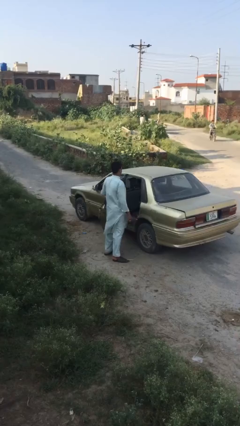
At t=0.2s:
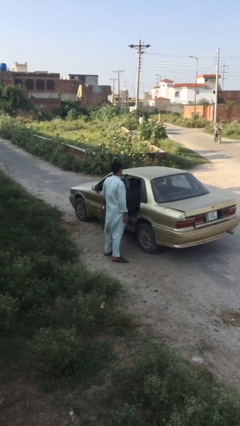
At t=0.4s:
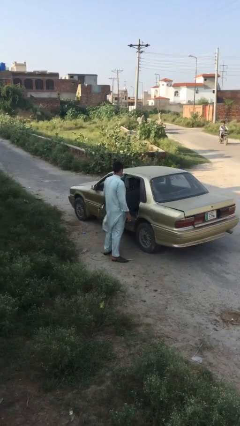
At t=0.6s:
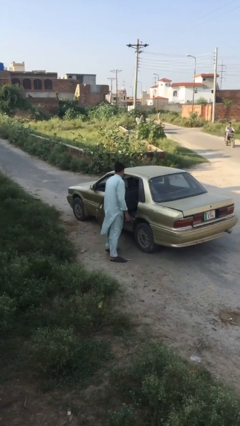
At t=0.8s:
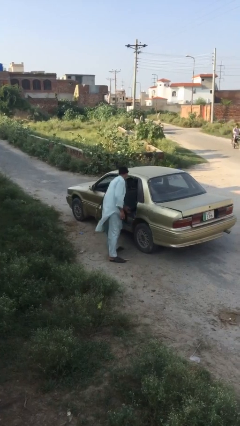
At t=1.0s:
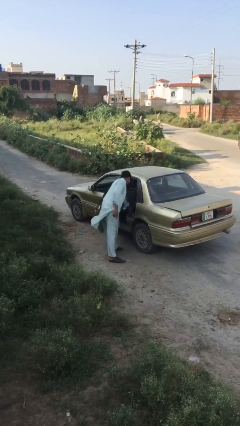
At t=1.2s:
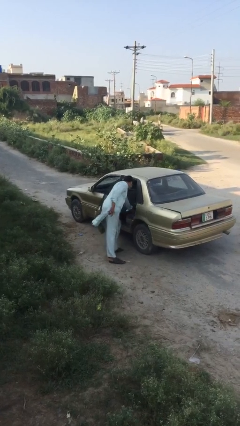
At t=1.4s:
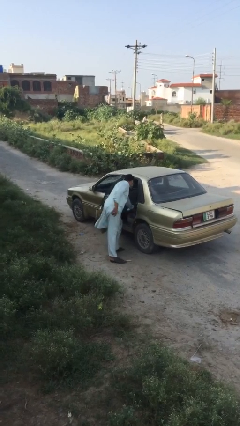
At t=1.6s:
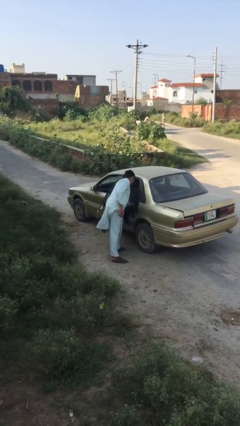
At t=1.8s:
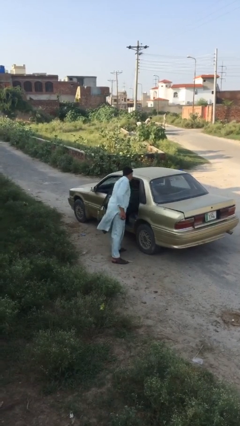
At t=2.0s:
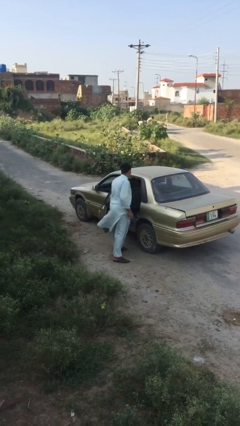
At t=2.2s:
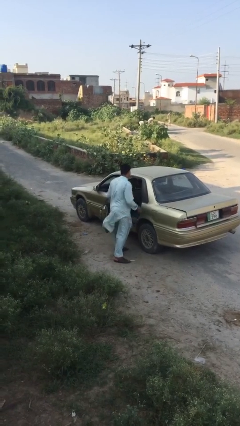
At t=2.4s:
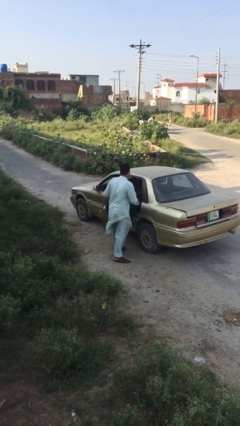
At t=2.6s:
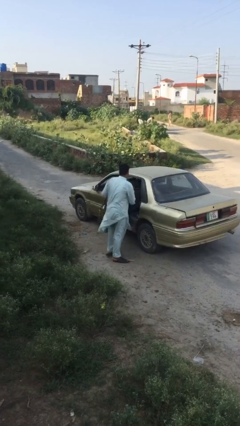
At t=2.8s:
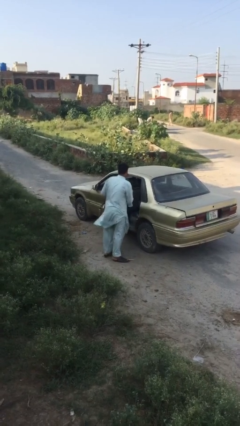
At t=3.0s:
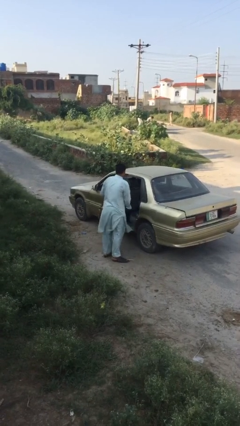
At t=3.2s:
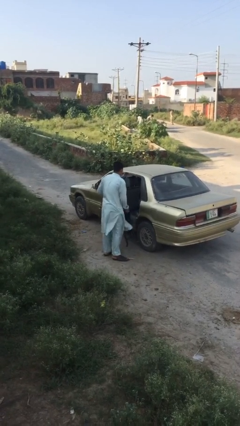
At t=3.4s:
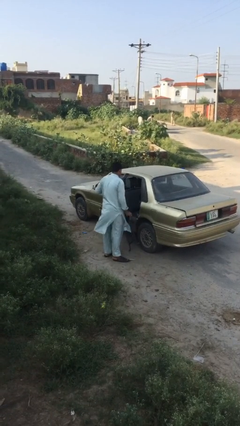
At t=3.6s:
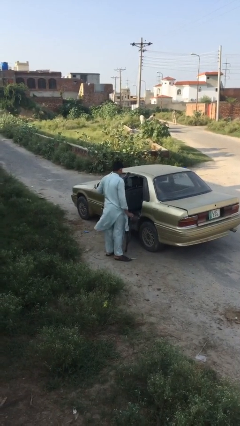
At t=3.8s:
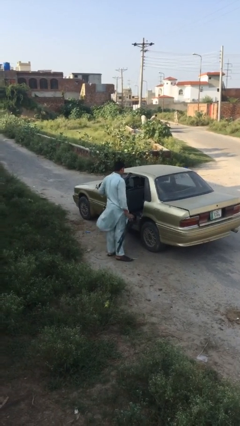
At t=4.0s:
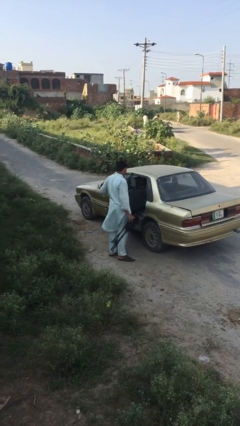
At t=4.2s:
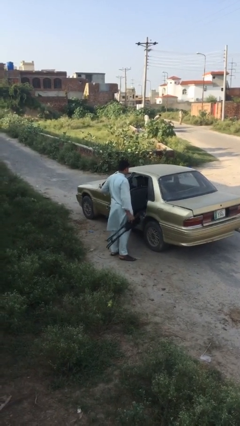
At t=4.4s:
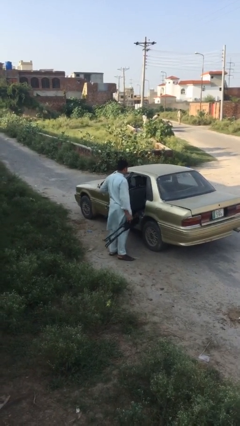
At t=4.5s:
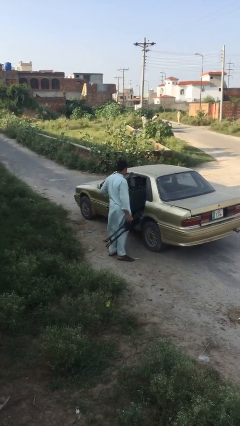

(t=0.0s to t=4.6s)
person unloads car

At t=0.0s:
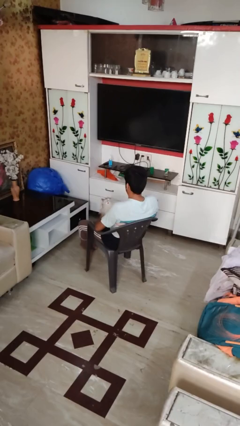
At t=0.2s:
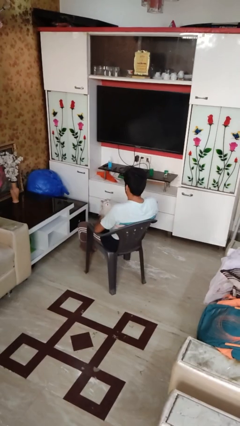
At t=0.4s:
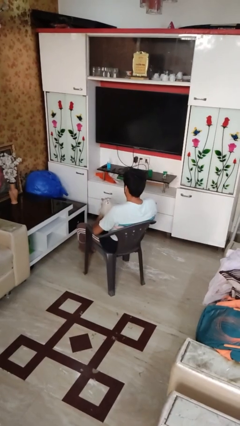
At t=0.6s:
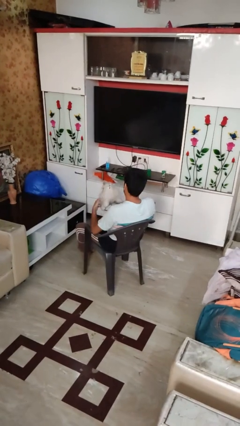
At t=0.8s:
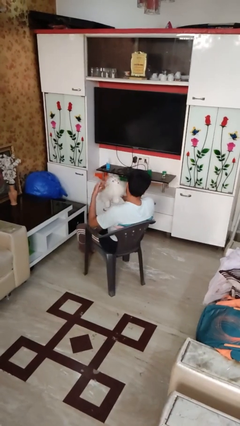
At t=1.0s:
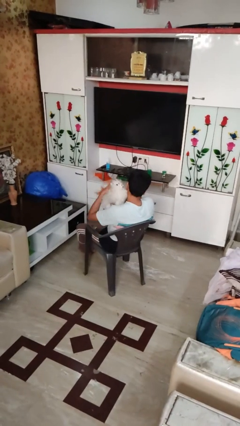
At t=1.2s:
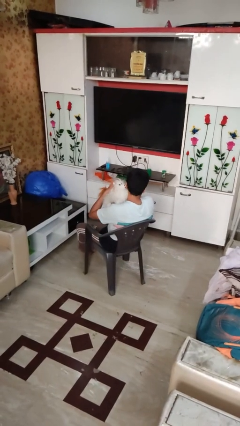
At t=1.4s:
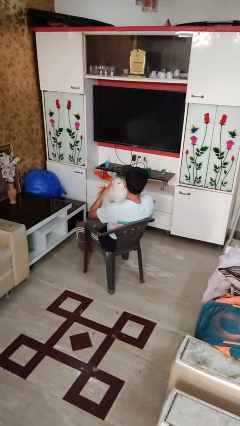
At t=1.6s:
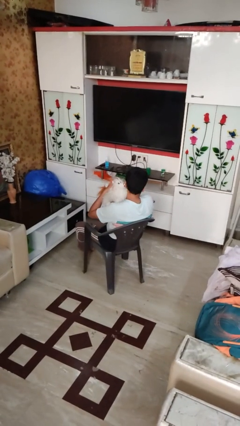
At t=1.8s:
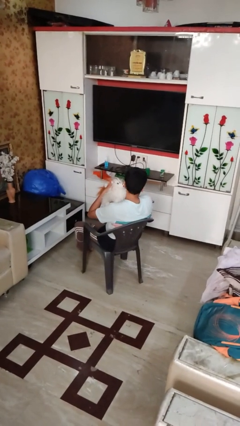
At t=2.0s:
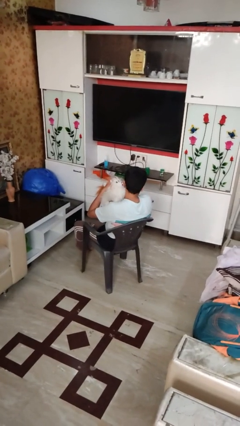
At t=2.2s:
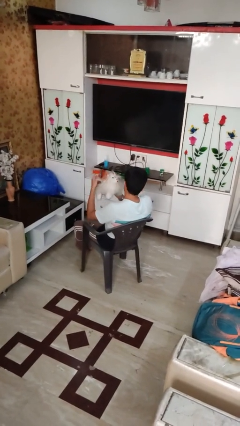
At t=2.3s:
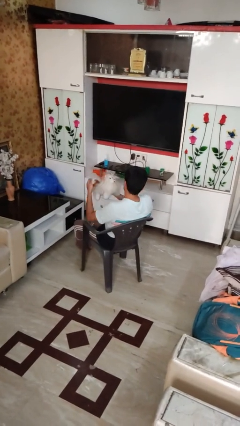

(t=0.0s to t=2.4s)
person hugs stuffed animal

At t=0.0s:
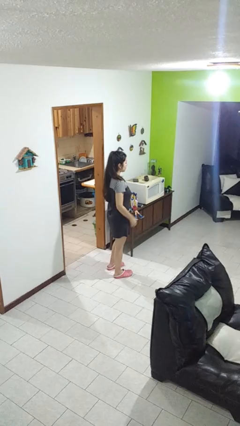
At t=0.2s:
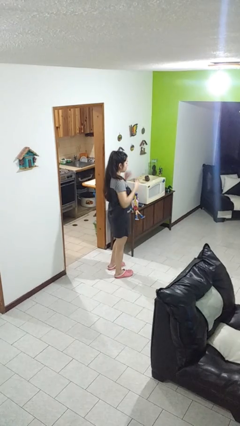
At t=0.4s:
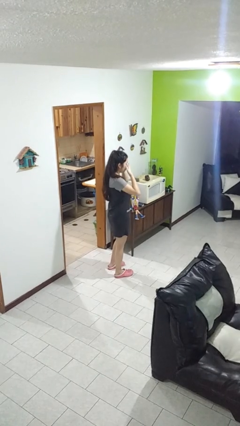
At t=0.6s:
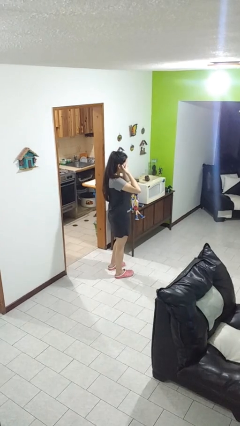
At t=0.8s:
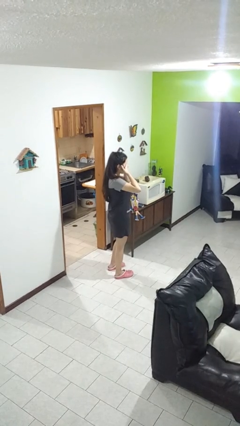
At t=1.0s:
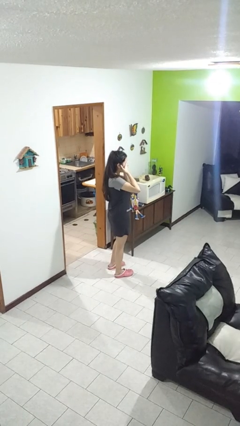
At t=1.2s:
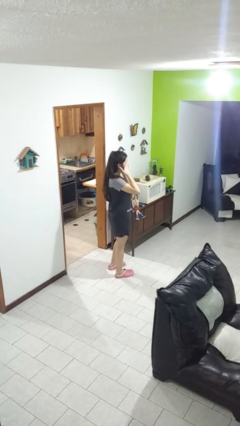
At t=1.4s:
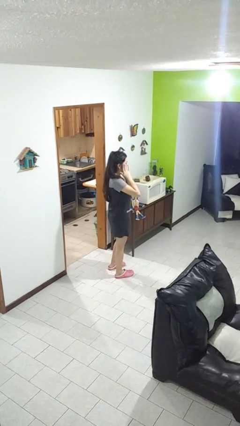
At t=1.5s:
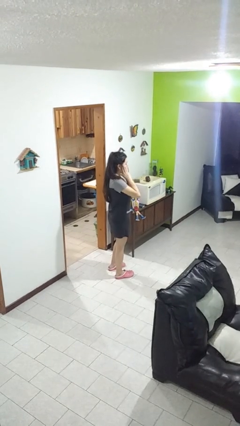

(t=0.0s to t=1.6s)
person rubs eyes

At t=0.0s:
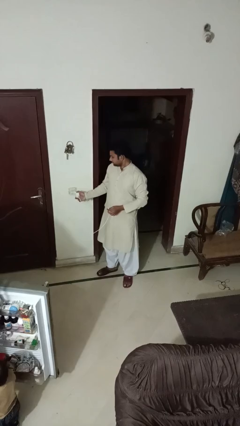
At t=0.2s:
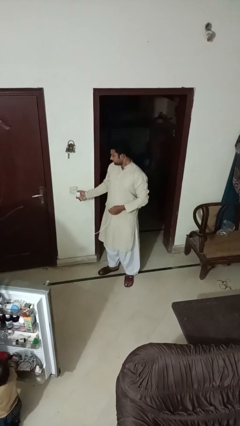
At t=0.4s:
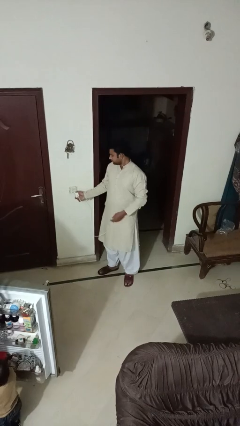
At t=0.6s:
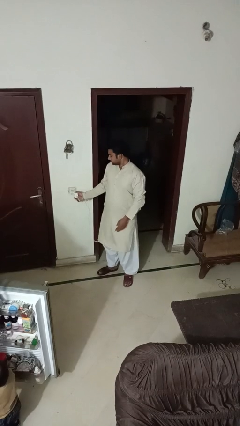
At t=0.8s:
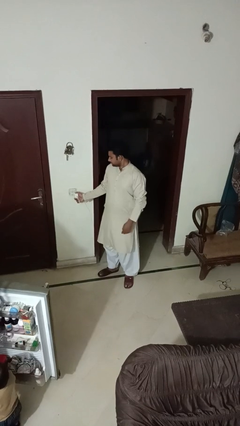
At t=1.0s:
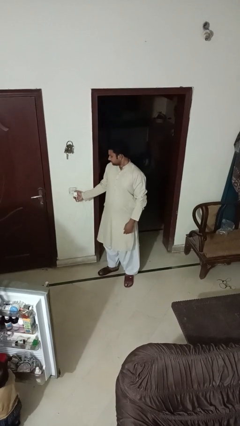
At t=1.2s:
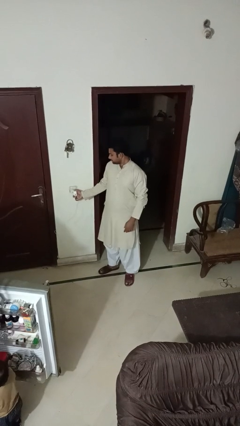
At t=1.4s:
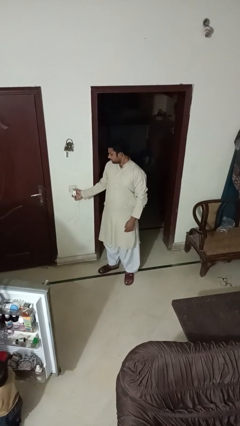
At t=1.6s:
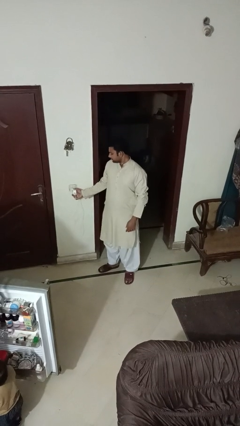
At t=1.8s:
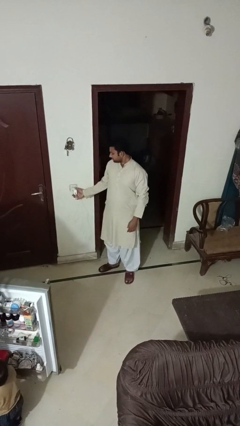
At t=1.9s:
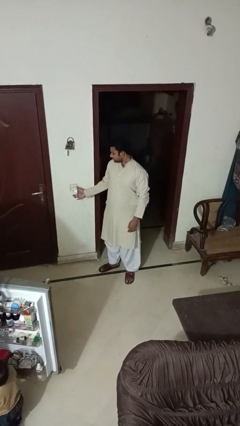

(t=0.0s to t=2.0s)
person plugs into electrical socket

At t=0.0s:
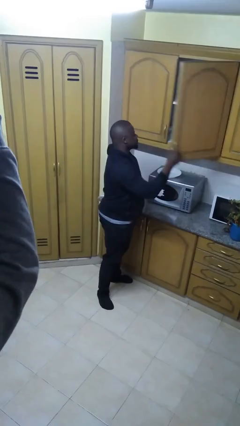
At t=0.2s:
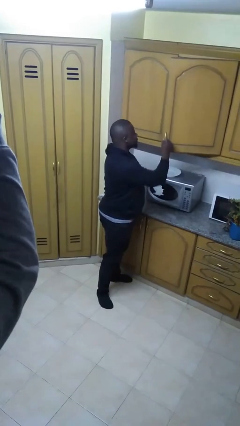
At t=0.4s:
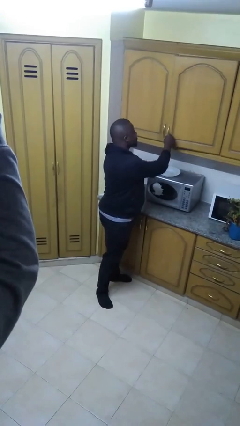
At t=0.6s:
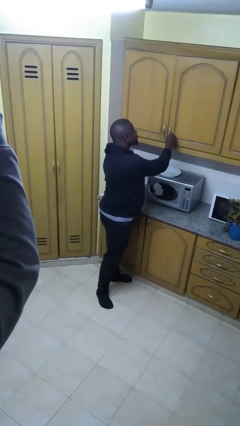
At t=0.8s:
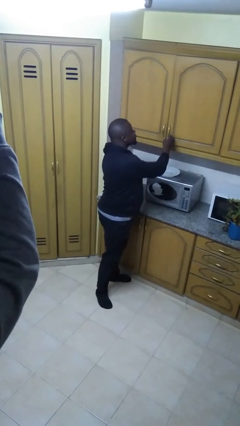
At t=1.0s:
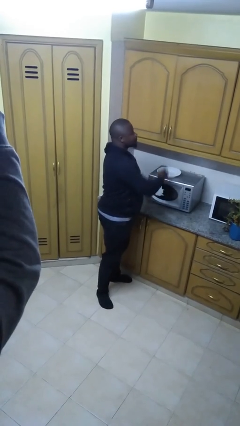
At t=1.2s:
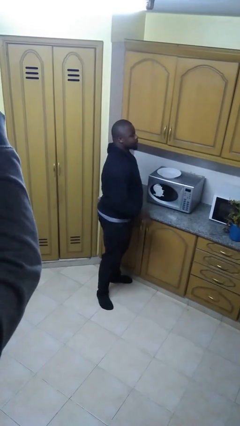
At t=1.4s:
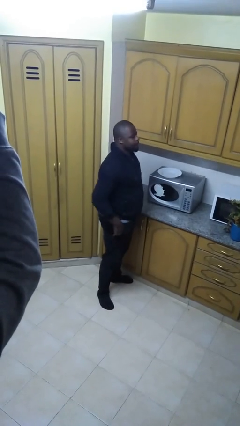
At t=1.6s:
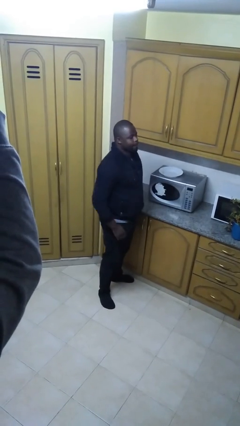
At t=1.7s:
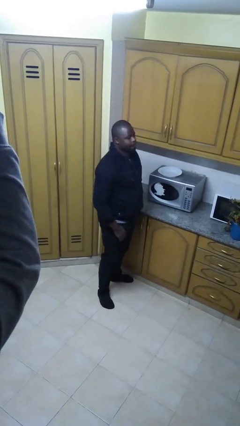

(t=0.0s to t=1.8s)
person closes cabinet

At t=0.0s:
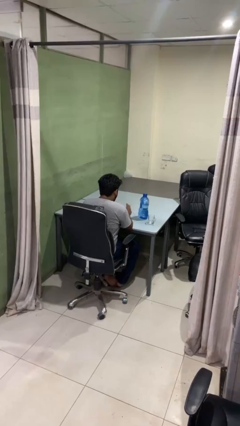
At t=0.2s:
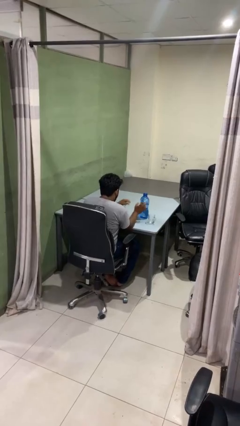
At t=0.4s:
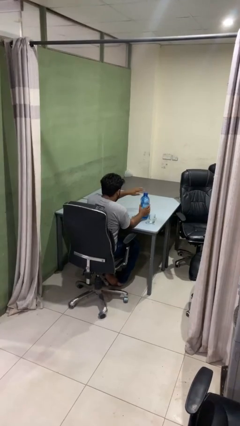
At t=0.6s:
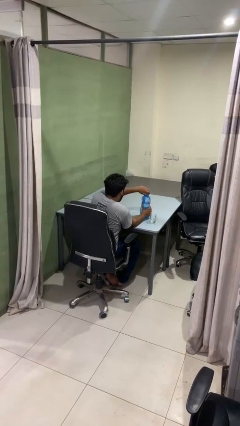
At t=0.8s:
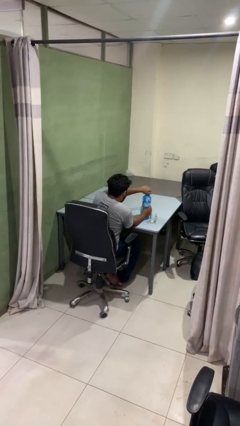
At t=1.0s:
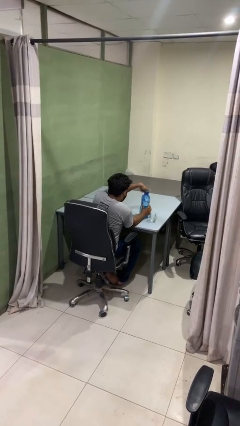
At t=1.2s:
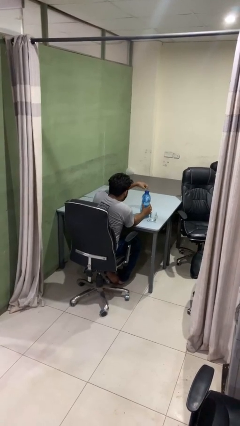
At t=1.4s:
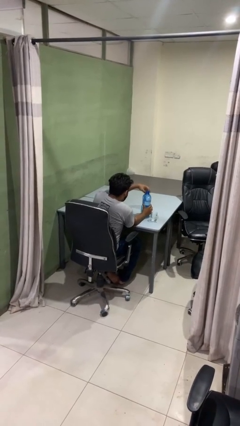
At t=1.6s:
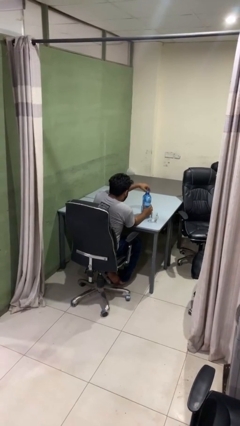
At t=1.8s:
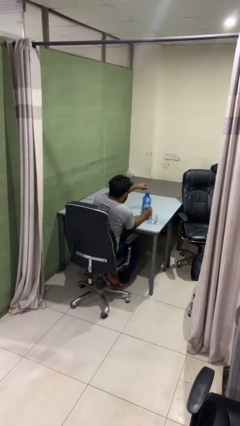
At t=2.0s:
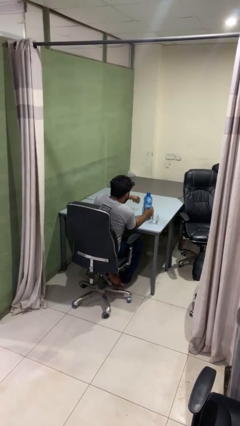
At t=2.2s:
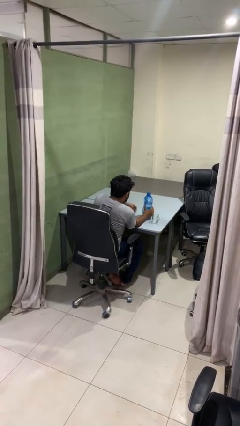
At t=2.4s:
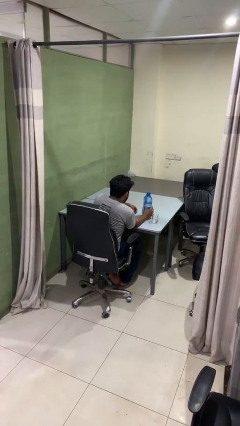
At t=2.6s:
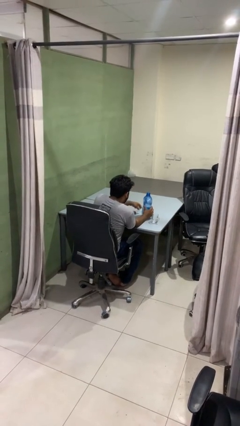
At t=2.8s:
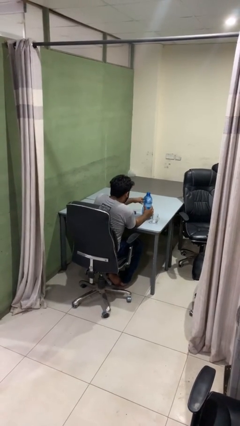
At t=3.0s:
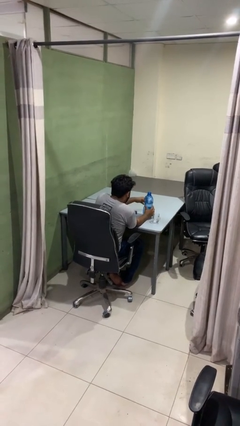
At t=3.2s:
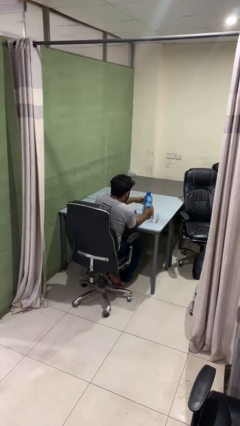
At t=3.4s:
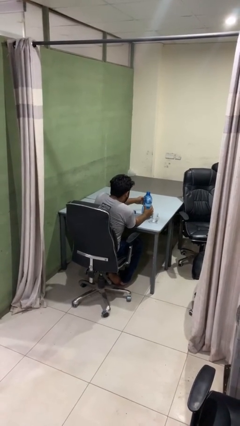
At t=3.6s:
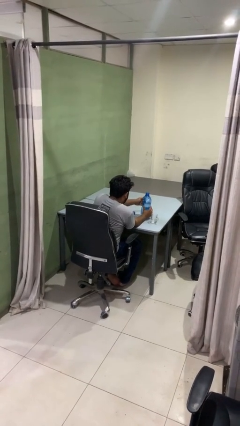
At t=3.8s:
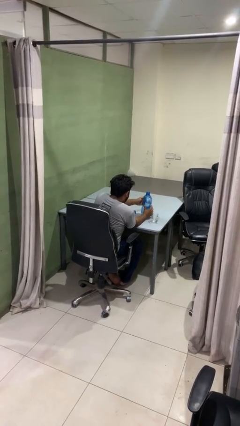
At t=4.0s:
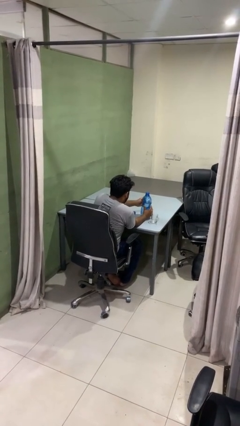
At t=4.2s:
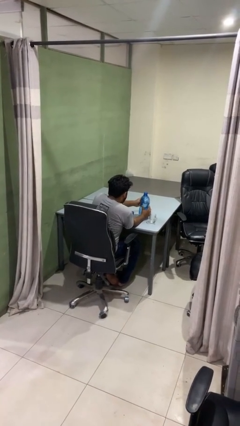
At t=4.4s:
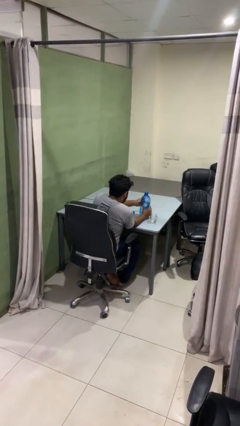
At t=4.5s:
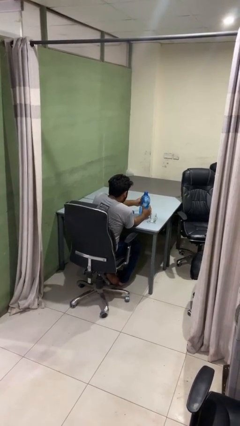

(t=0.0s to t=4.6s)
person unscrews lid from bottle

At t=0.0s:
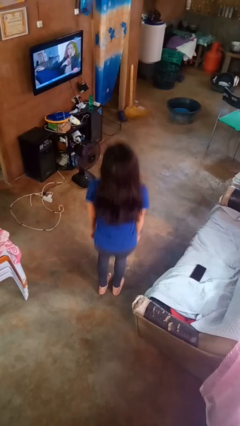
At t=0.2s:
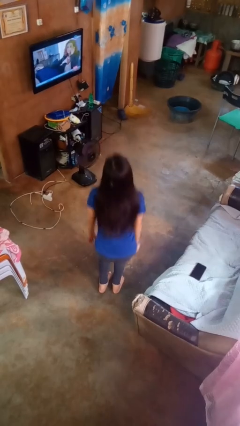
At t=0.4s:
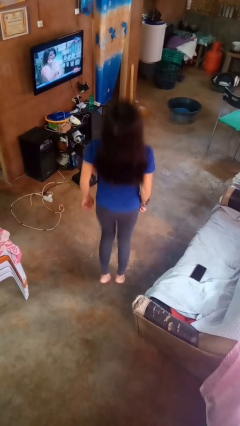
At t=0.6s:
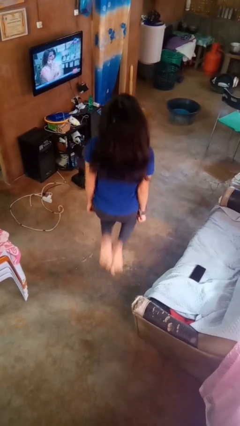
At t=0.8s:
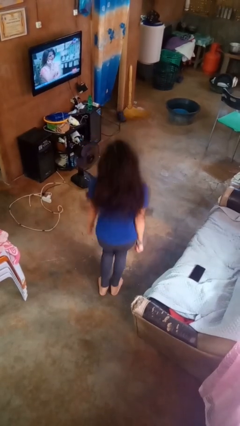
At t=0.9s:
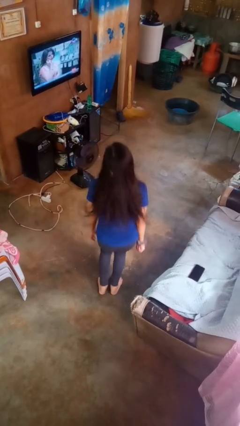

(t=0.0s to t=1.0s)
person jumps
